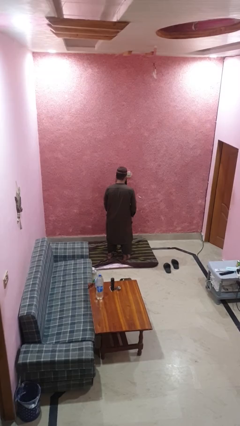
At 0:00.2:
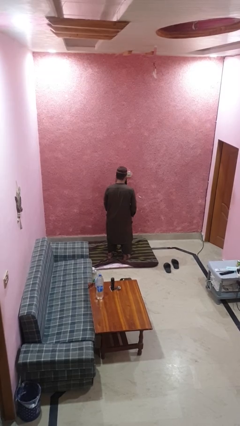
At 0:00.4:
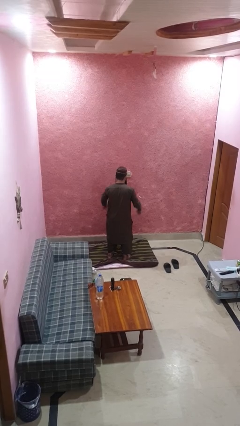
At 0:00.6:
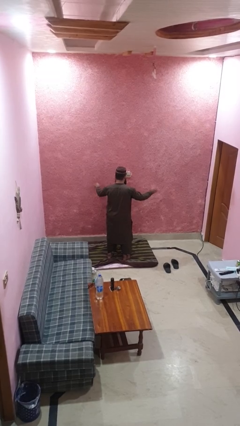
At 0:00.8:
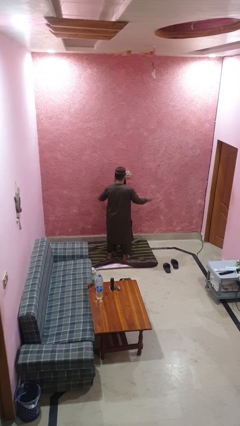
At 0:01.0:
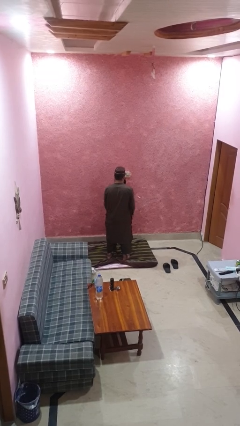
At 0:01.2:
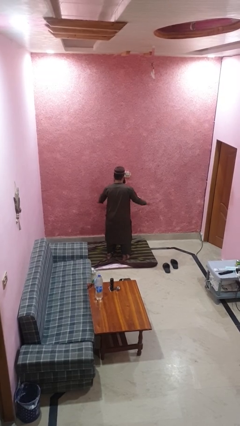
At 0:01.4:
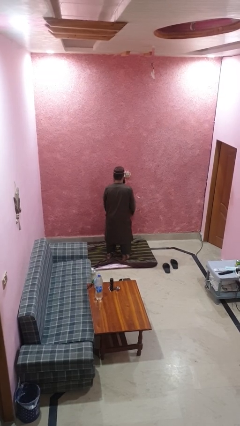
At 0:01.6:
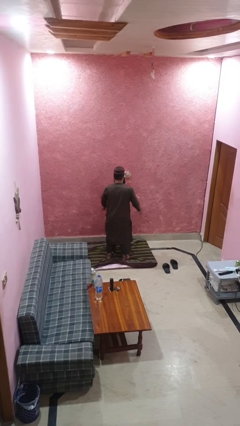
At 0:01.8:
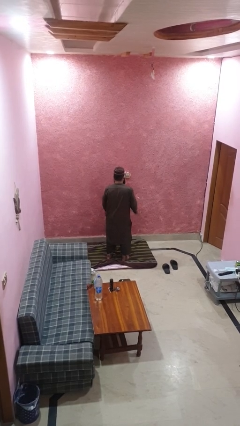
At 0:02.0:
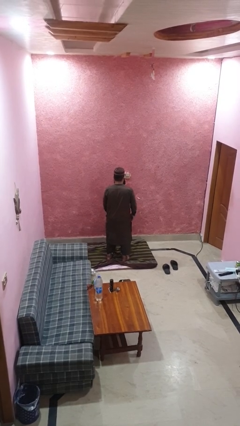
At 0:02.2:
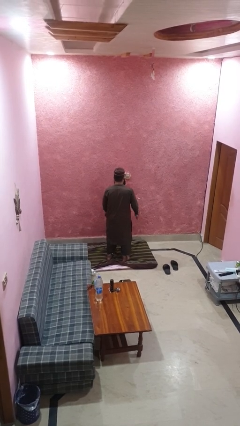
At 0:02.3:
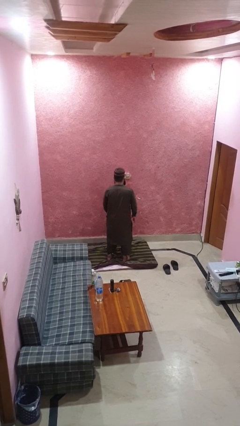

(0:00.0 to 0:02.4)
person slaps hands on thighs

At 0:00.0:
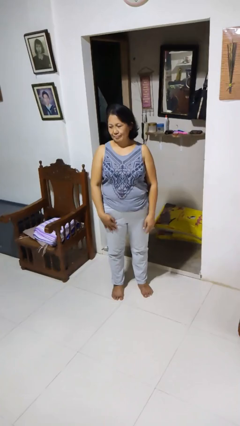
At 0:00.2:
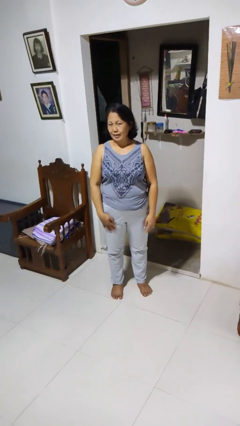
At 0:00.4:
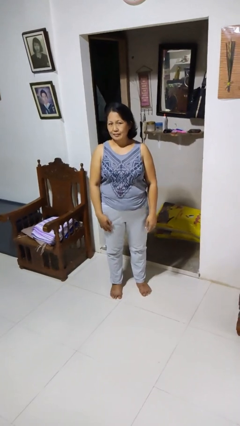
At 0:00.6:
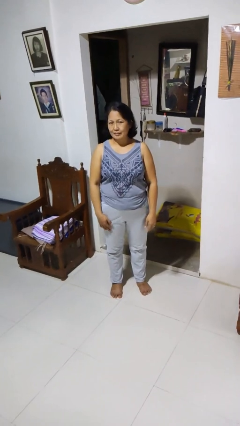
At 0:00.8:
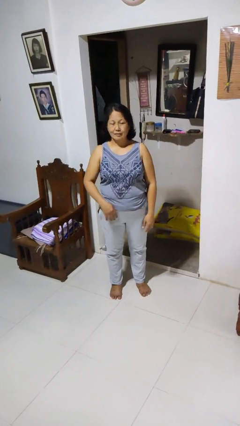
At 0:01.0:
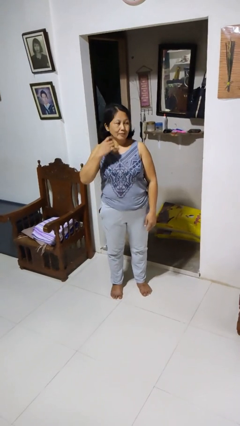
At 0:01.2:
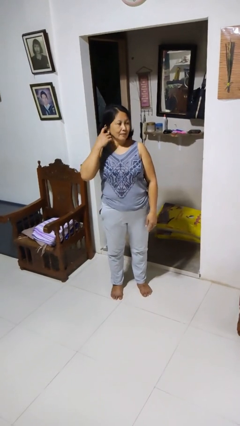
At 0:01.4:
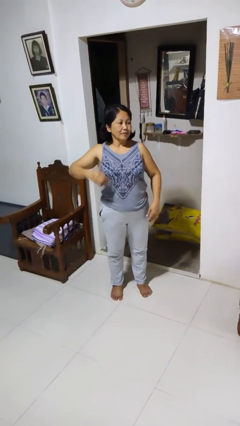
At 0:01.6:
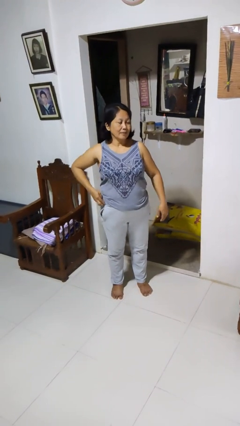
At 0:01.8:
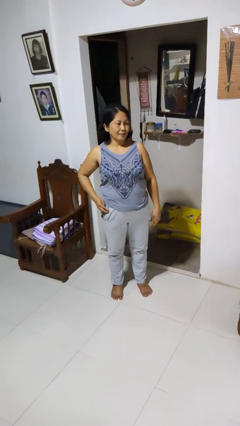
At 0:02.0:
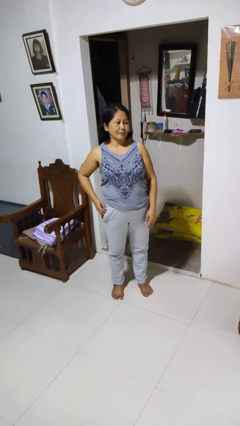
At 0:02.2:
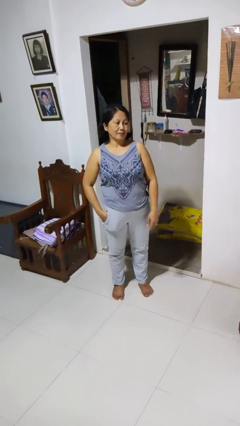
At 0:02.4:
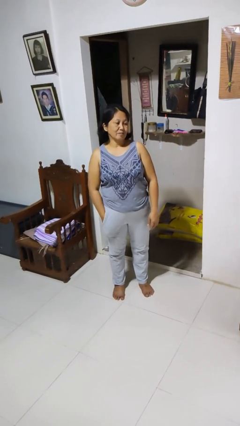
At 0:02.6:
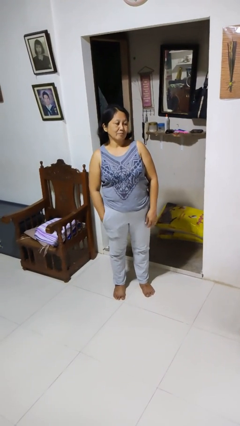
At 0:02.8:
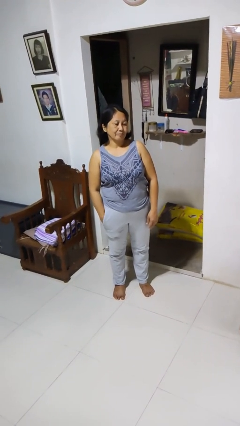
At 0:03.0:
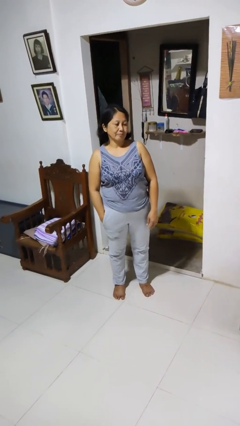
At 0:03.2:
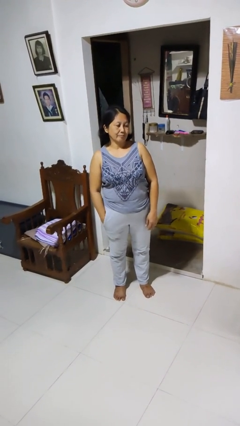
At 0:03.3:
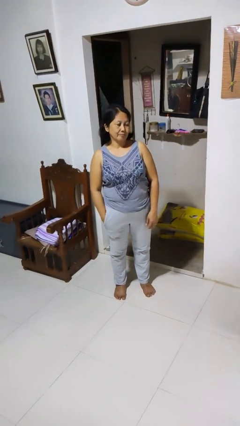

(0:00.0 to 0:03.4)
person puts hands in back pockets

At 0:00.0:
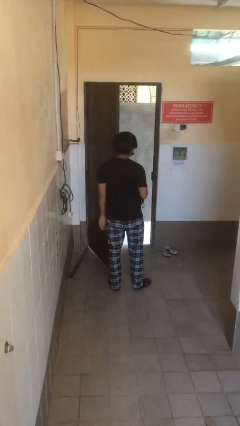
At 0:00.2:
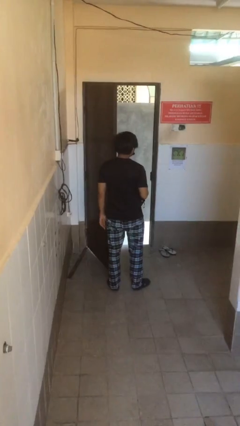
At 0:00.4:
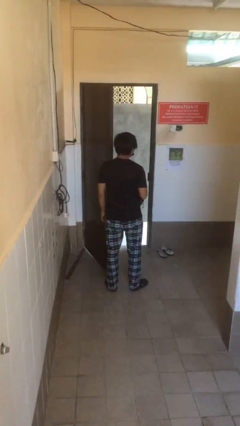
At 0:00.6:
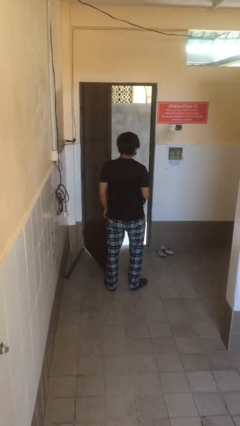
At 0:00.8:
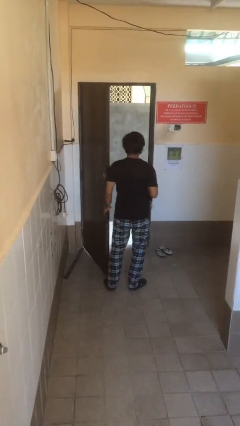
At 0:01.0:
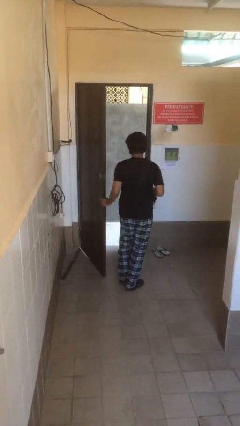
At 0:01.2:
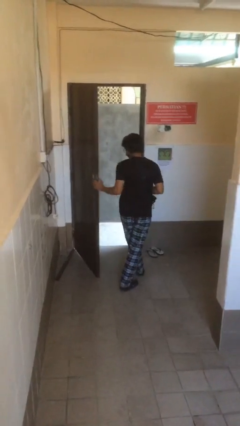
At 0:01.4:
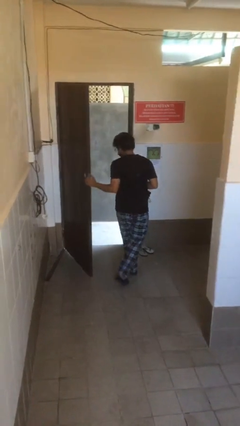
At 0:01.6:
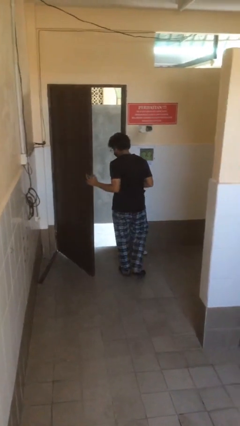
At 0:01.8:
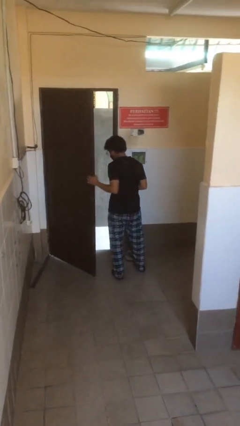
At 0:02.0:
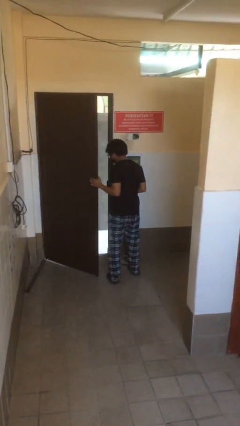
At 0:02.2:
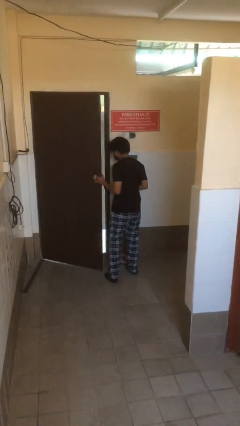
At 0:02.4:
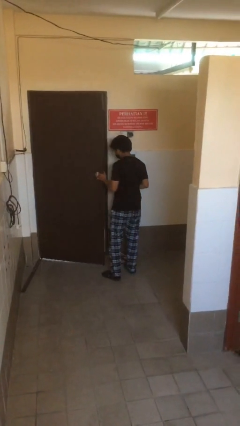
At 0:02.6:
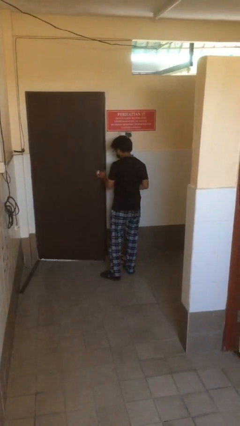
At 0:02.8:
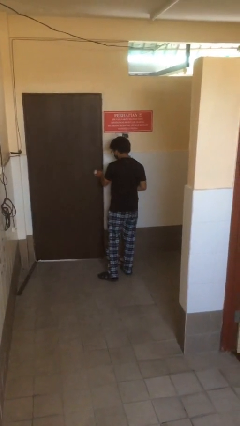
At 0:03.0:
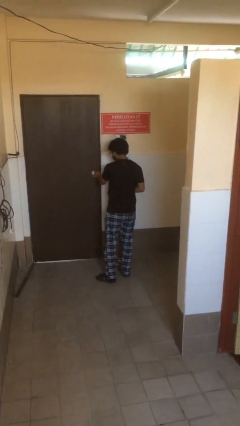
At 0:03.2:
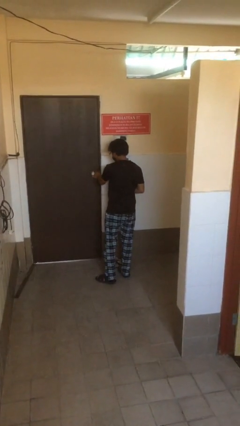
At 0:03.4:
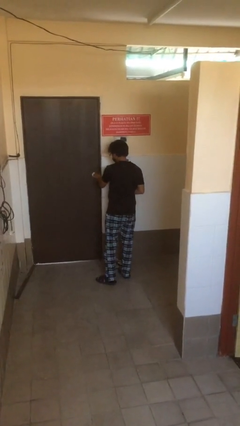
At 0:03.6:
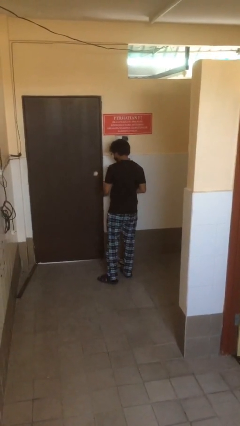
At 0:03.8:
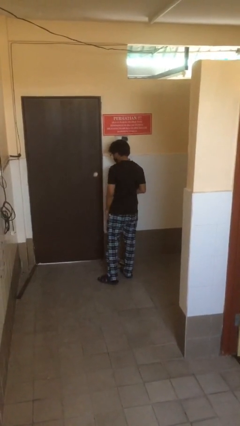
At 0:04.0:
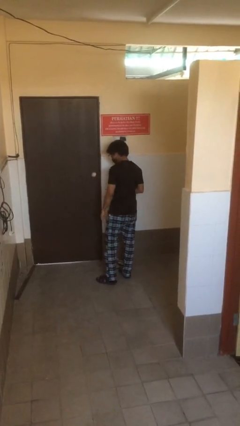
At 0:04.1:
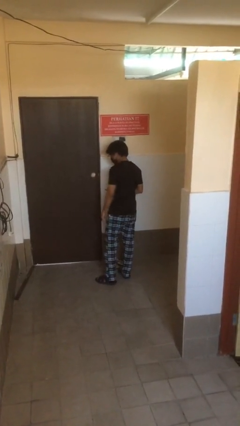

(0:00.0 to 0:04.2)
person closes facility door

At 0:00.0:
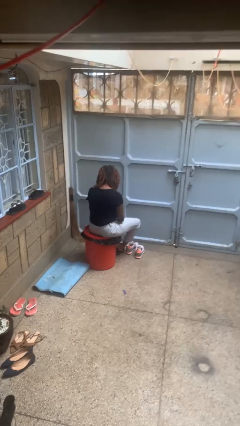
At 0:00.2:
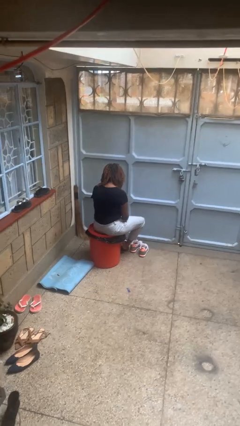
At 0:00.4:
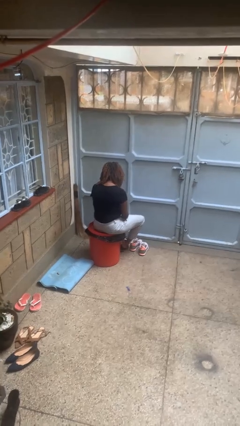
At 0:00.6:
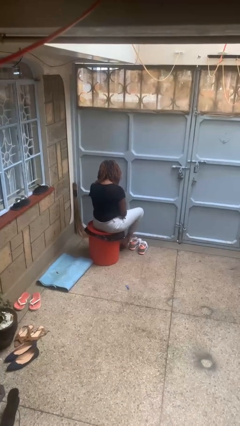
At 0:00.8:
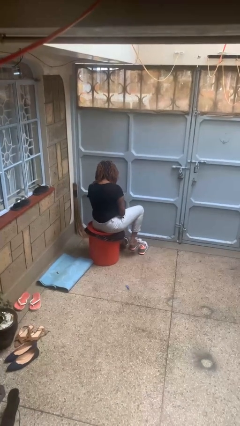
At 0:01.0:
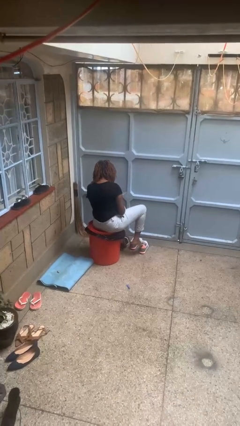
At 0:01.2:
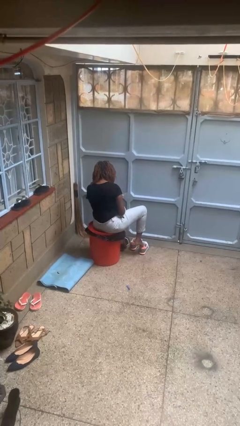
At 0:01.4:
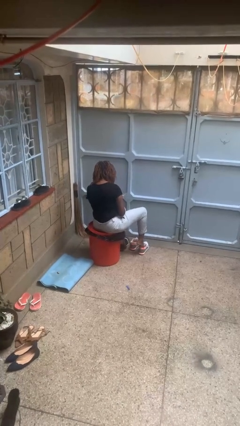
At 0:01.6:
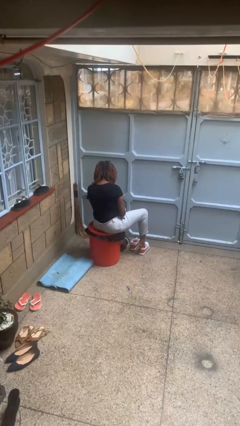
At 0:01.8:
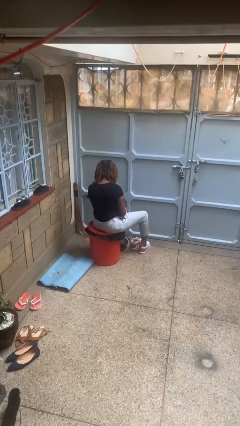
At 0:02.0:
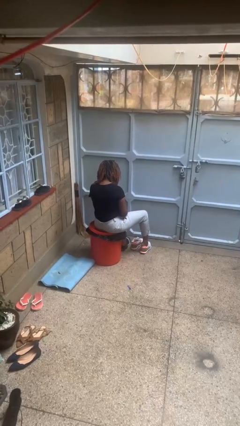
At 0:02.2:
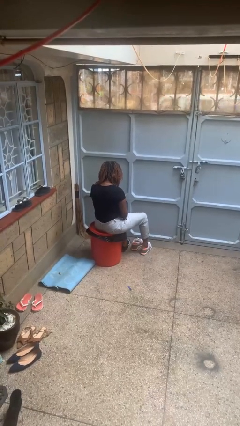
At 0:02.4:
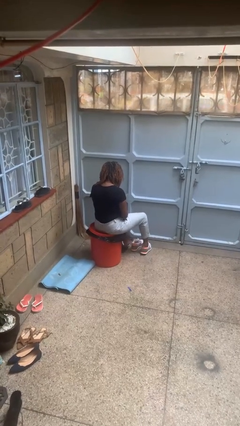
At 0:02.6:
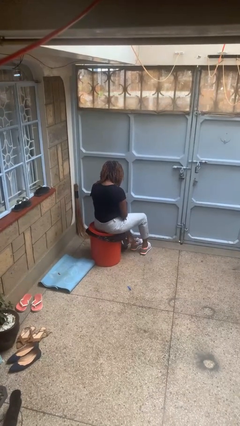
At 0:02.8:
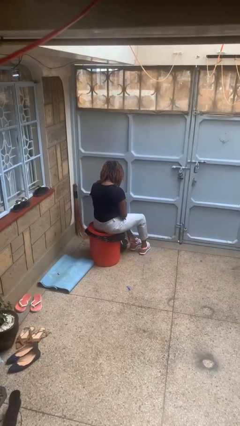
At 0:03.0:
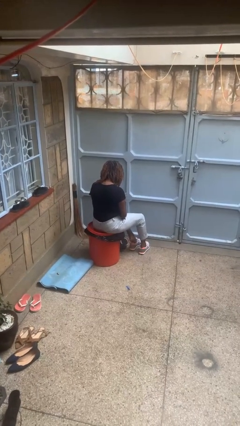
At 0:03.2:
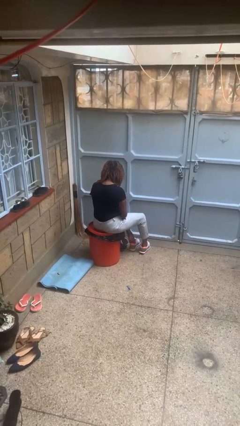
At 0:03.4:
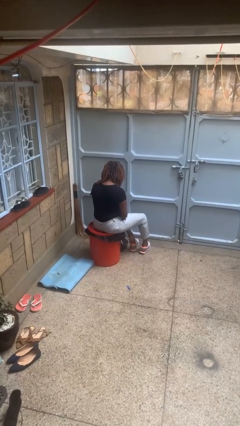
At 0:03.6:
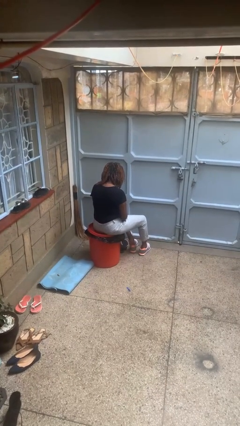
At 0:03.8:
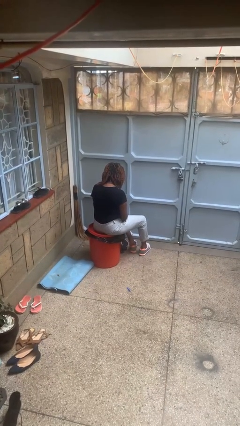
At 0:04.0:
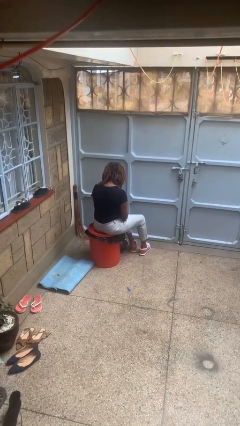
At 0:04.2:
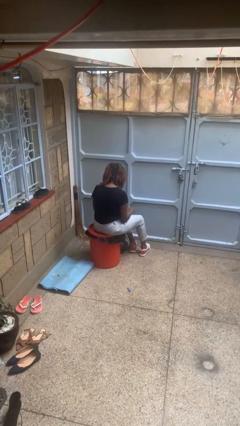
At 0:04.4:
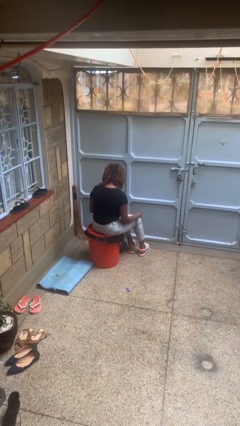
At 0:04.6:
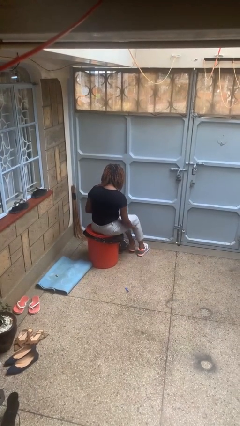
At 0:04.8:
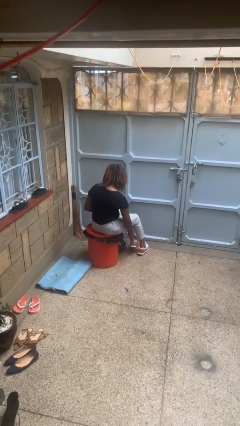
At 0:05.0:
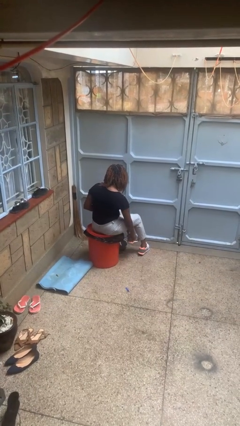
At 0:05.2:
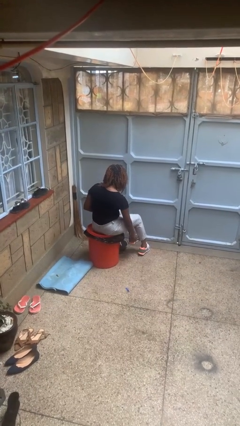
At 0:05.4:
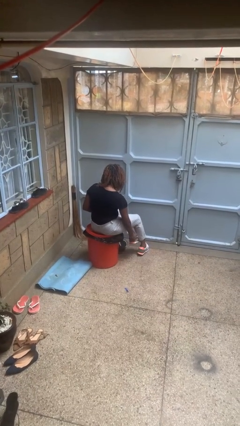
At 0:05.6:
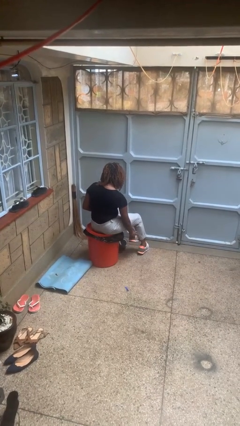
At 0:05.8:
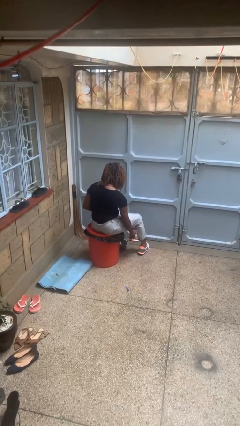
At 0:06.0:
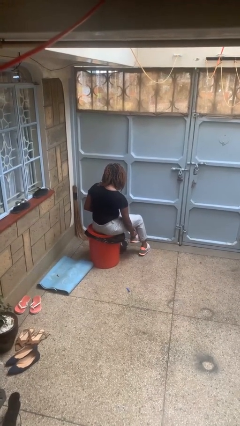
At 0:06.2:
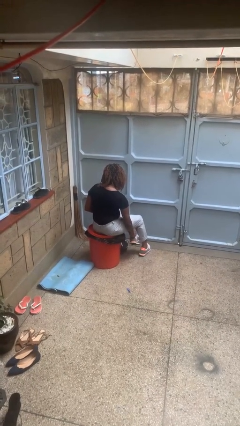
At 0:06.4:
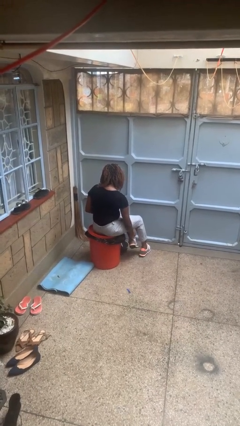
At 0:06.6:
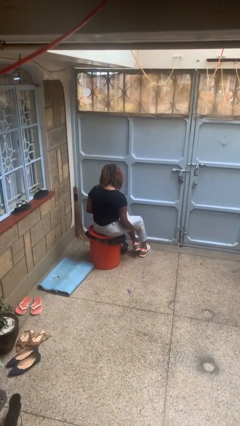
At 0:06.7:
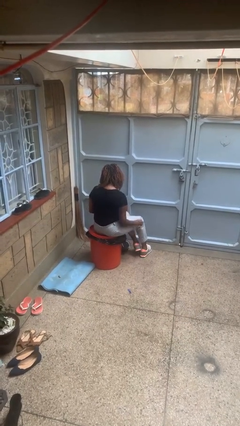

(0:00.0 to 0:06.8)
person puts on shoes

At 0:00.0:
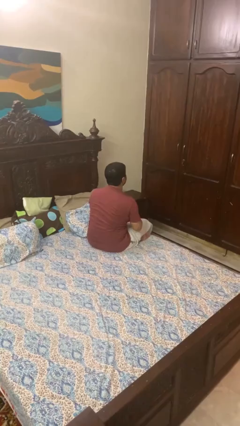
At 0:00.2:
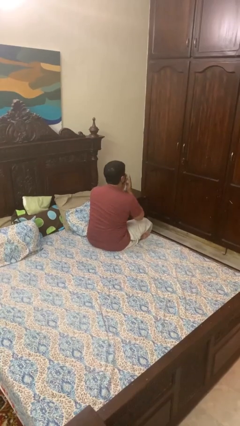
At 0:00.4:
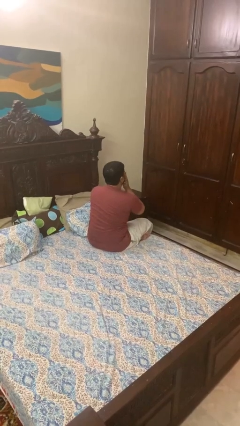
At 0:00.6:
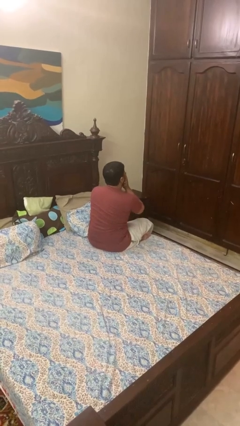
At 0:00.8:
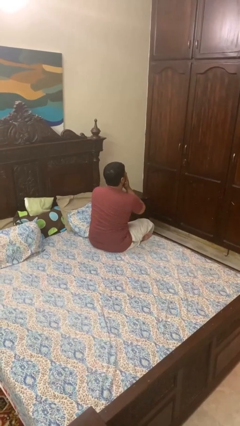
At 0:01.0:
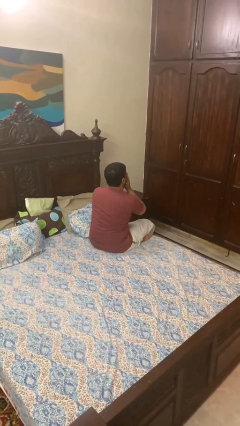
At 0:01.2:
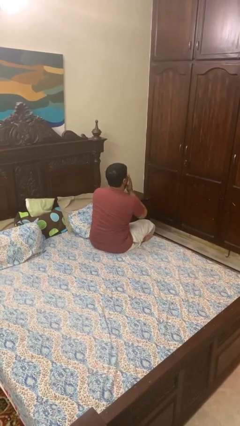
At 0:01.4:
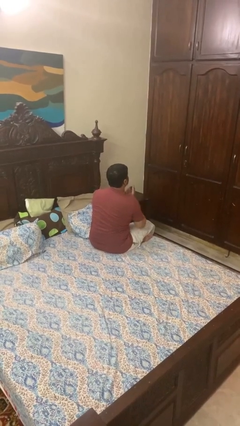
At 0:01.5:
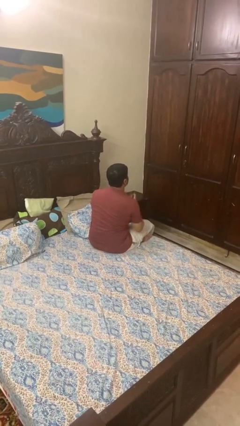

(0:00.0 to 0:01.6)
person covers face with hands
